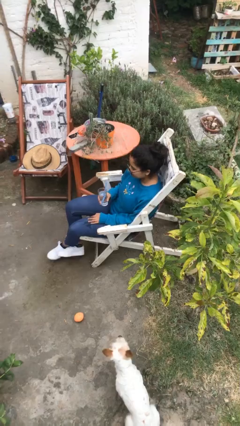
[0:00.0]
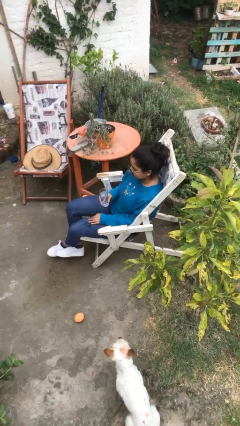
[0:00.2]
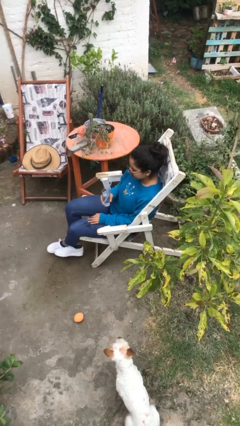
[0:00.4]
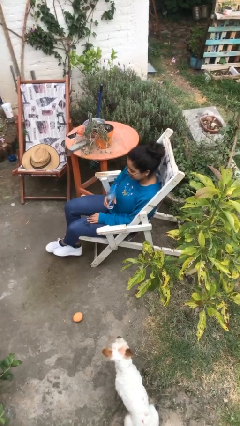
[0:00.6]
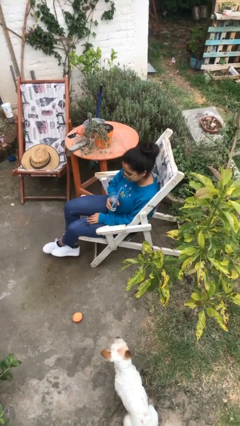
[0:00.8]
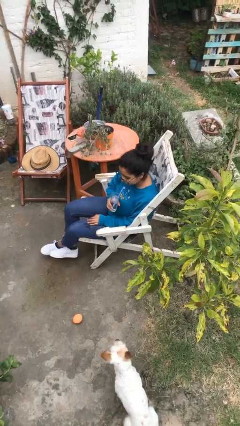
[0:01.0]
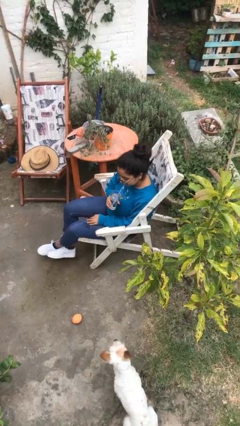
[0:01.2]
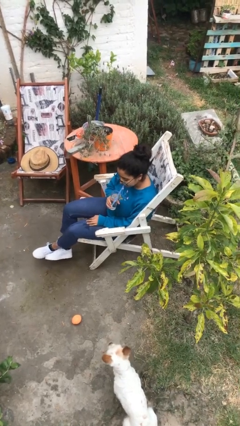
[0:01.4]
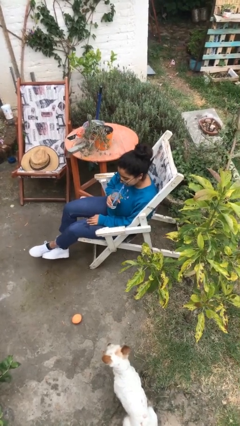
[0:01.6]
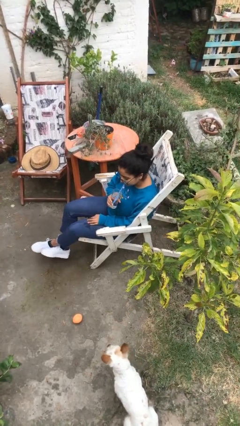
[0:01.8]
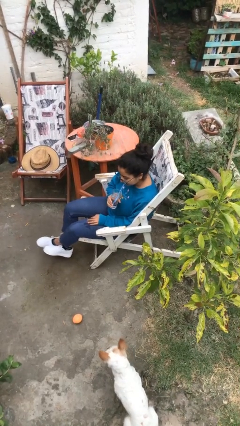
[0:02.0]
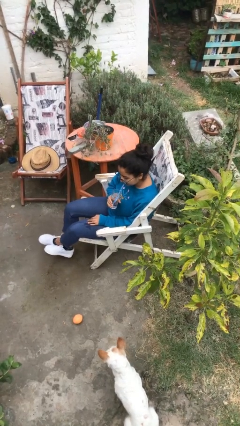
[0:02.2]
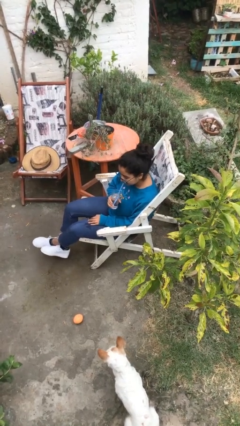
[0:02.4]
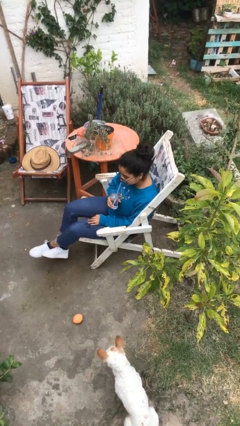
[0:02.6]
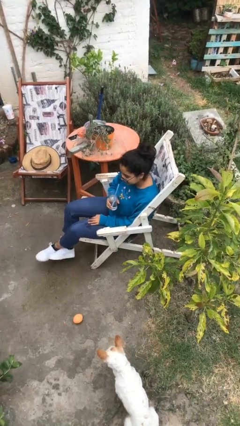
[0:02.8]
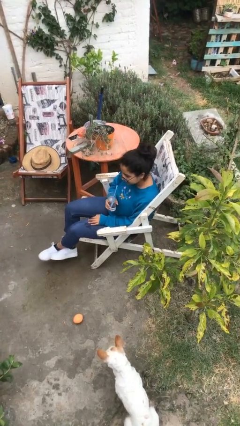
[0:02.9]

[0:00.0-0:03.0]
person drinks from straw

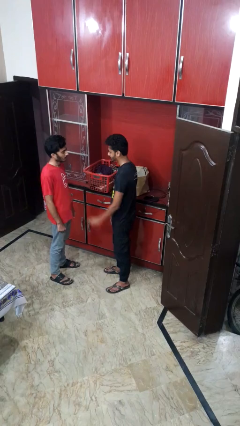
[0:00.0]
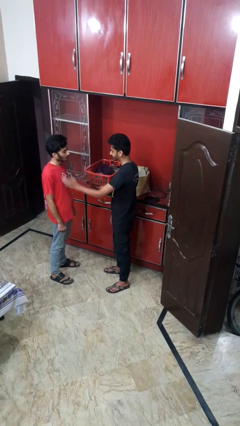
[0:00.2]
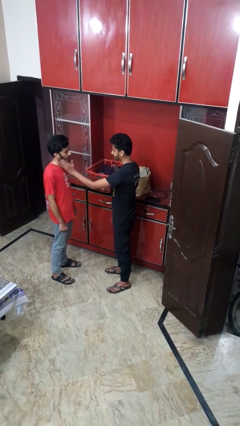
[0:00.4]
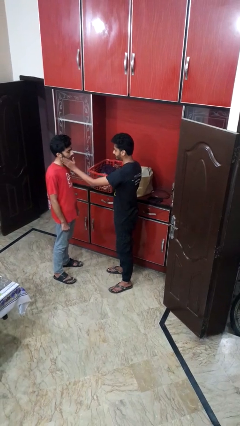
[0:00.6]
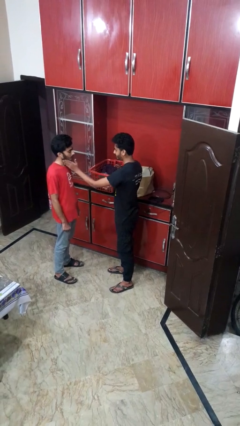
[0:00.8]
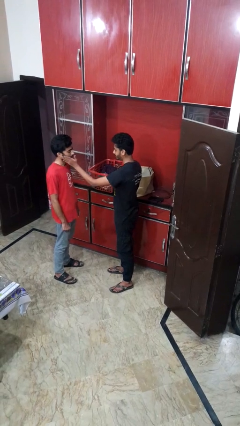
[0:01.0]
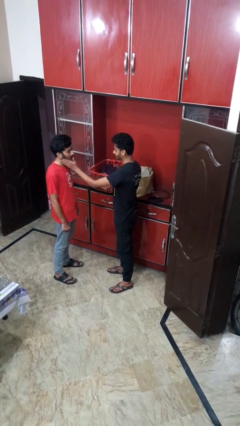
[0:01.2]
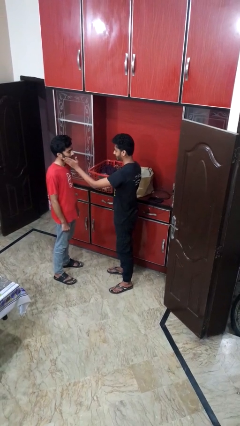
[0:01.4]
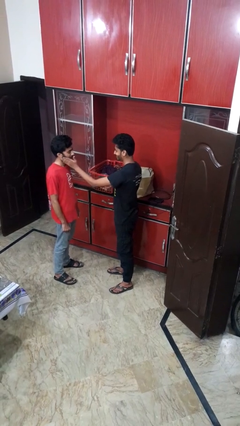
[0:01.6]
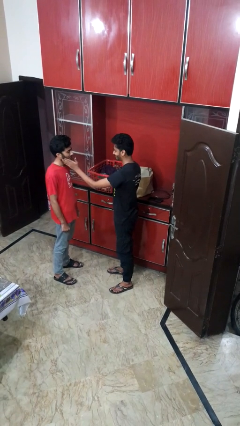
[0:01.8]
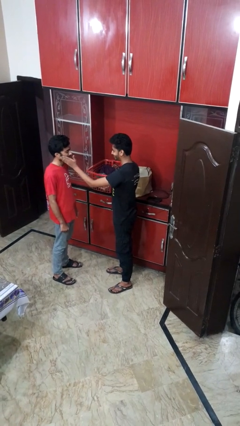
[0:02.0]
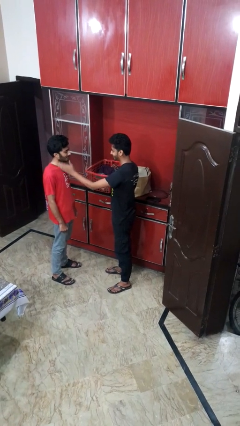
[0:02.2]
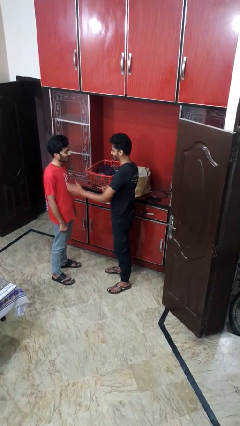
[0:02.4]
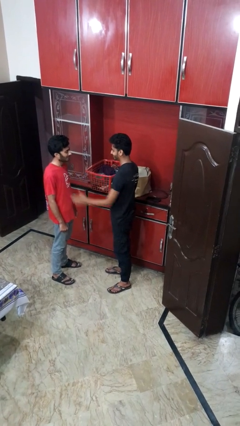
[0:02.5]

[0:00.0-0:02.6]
person touches face of person

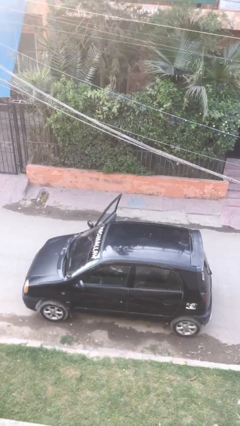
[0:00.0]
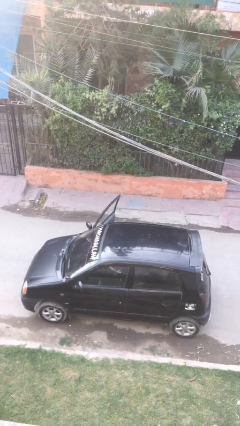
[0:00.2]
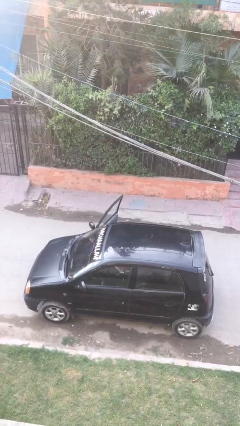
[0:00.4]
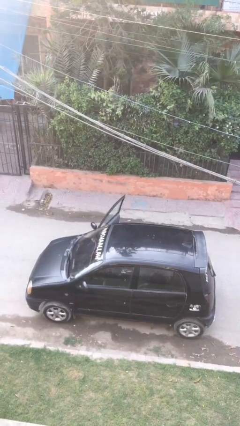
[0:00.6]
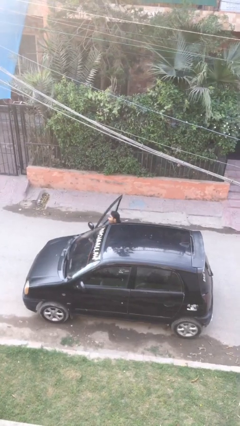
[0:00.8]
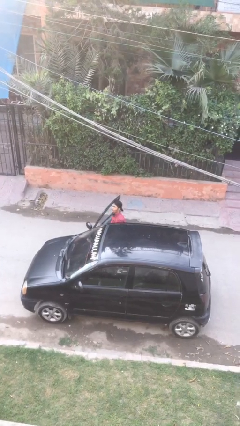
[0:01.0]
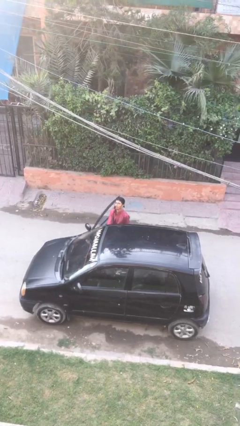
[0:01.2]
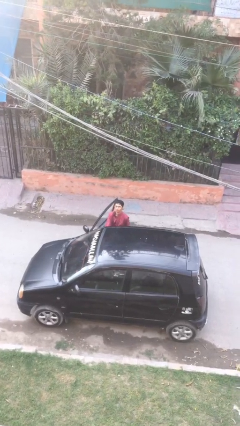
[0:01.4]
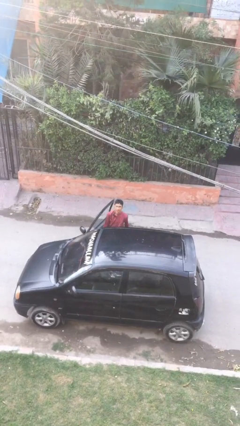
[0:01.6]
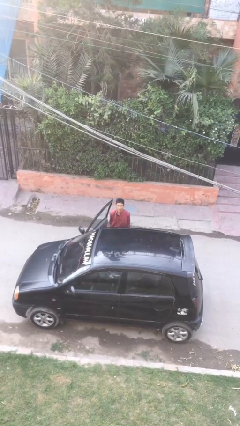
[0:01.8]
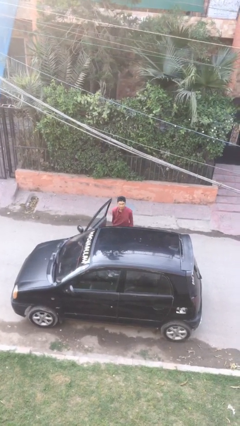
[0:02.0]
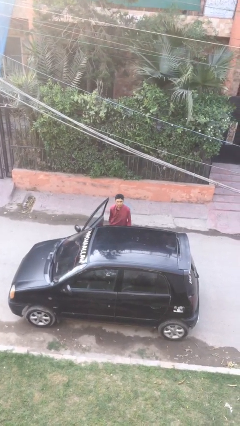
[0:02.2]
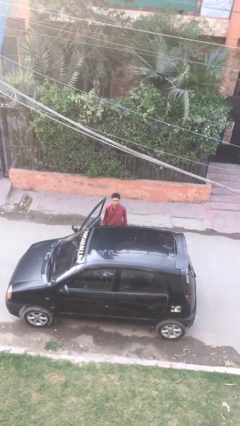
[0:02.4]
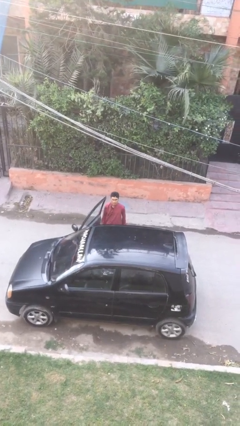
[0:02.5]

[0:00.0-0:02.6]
person exits car

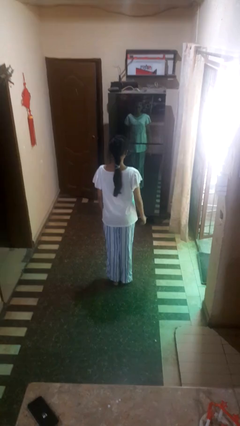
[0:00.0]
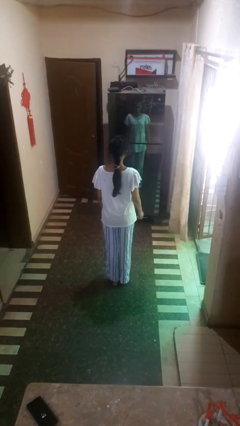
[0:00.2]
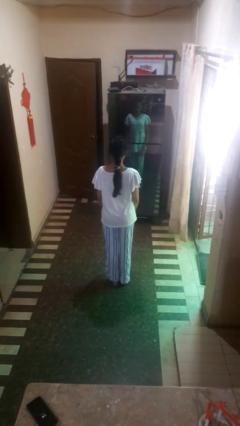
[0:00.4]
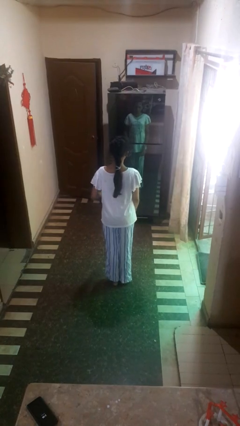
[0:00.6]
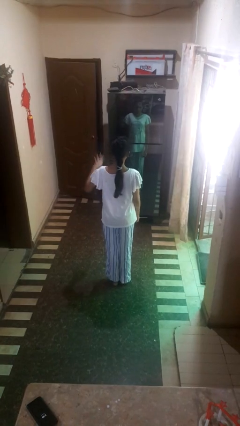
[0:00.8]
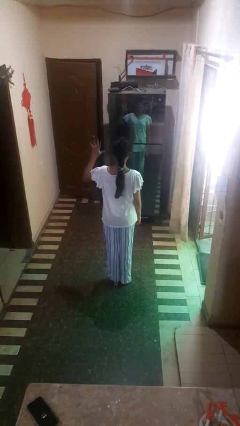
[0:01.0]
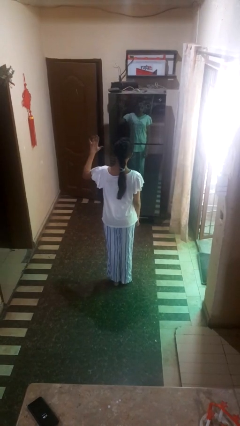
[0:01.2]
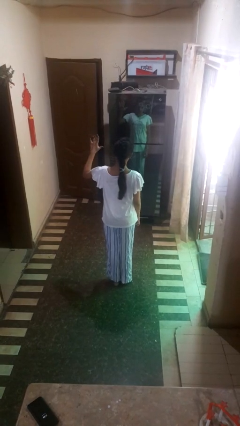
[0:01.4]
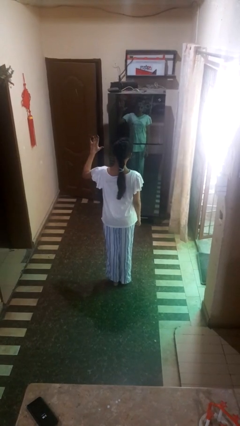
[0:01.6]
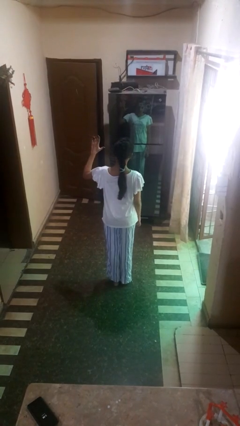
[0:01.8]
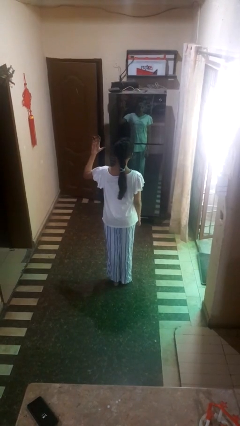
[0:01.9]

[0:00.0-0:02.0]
person gestures number five

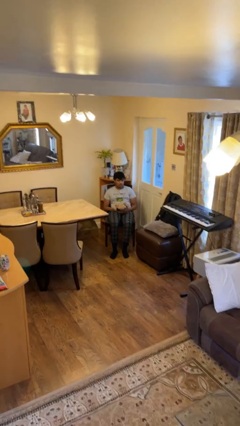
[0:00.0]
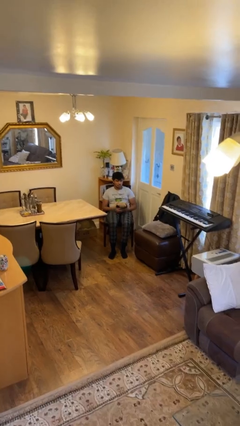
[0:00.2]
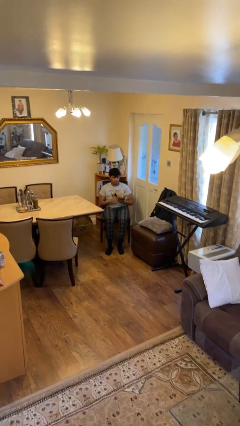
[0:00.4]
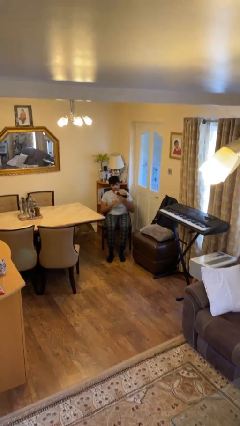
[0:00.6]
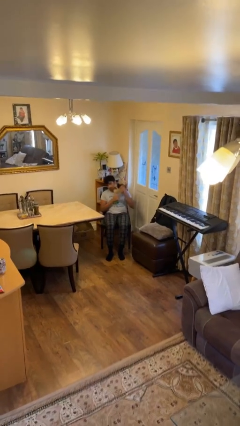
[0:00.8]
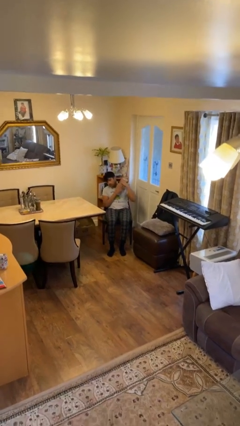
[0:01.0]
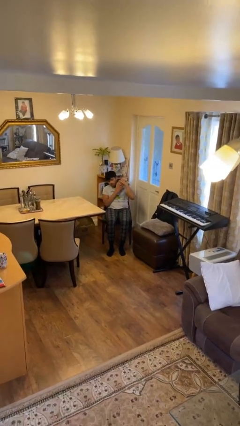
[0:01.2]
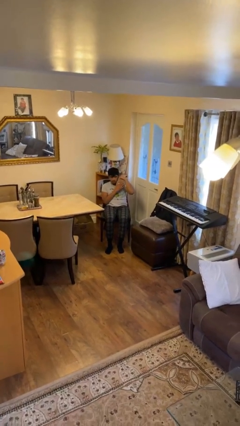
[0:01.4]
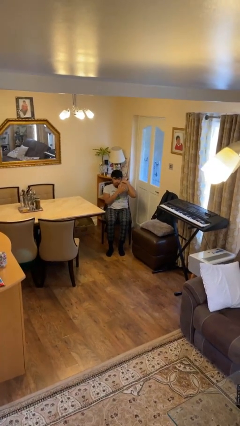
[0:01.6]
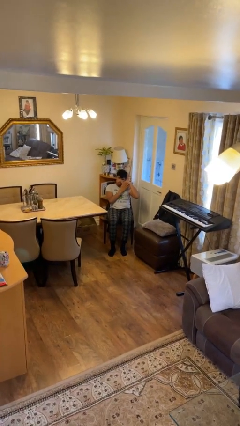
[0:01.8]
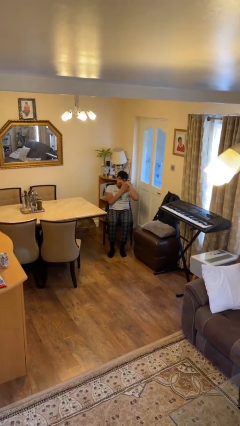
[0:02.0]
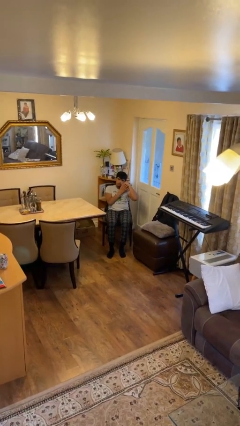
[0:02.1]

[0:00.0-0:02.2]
person hugs stuffed animal

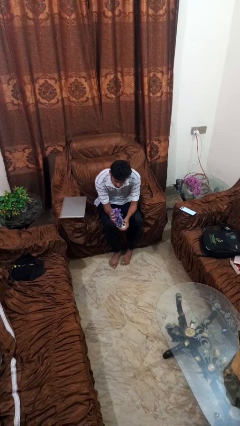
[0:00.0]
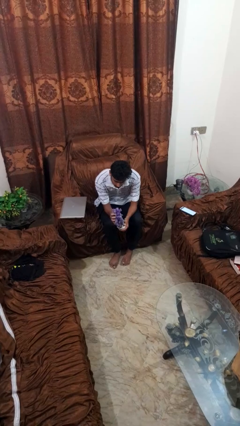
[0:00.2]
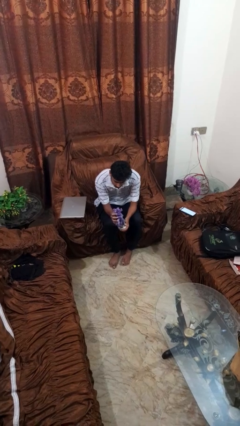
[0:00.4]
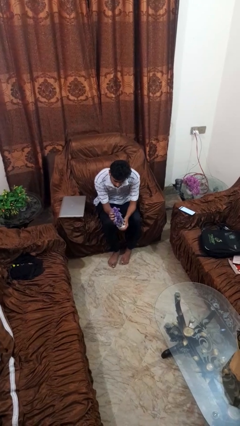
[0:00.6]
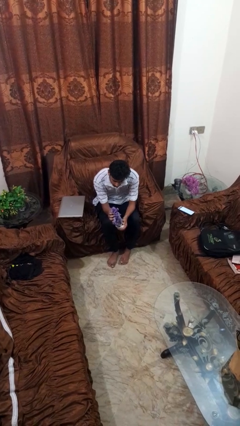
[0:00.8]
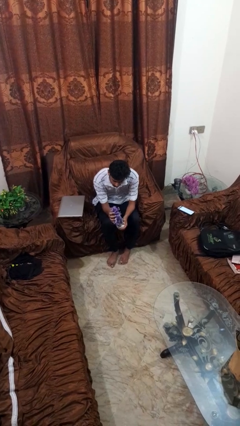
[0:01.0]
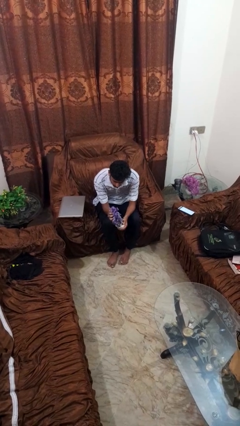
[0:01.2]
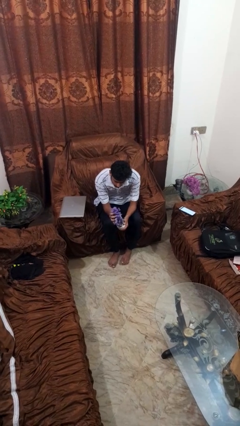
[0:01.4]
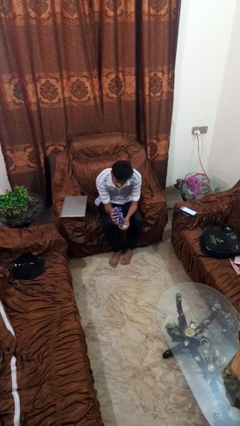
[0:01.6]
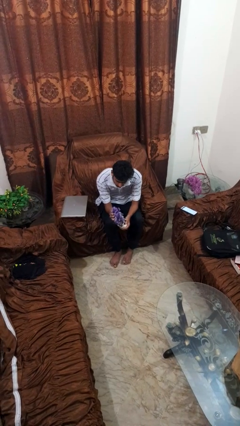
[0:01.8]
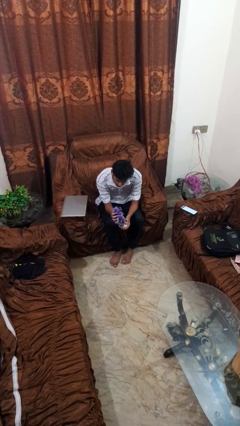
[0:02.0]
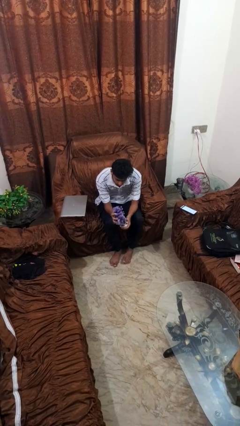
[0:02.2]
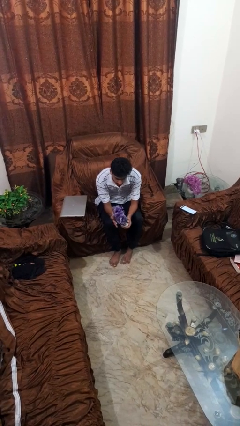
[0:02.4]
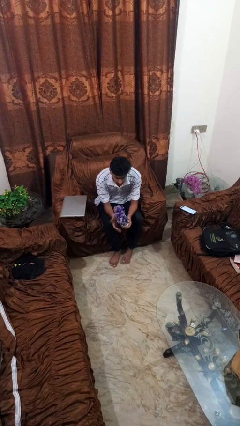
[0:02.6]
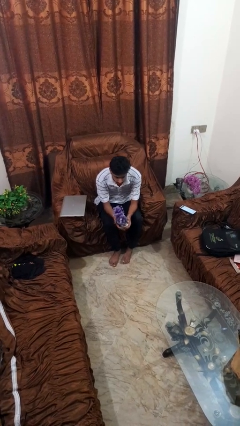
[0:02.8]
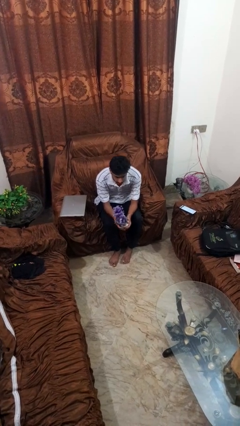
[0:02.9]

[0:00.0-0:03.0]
person squeezes object

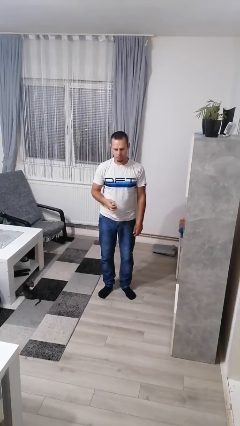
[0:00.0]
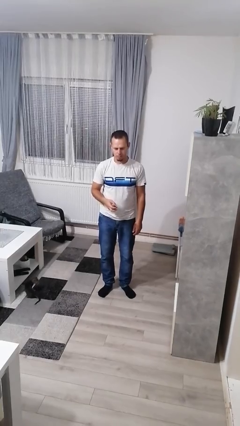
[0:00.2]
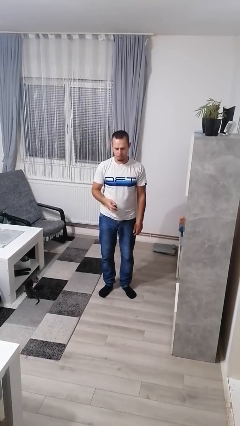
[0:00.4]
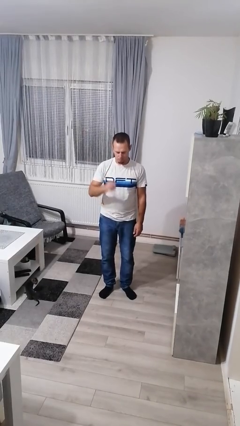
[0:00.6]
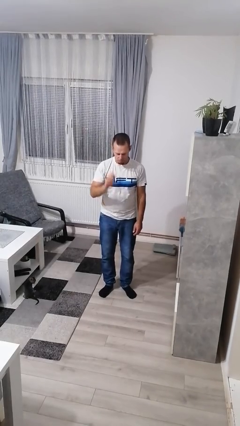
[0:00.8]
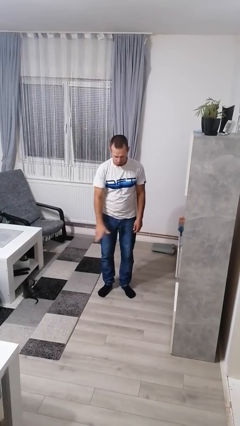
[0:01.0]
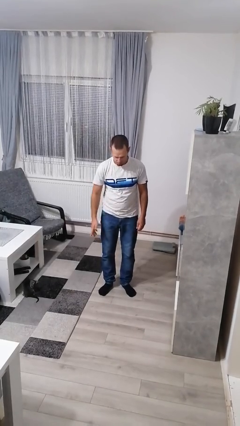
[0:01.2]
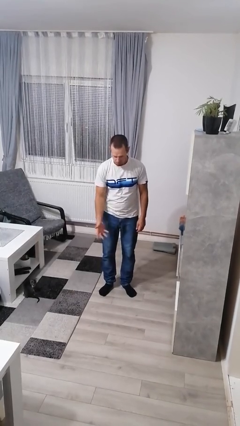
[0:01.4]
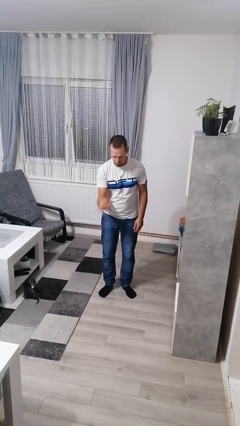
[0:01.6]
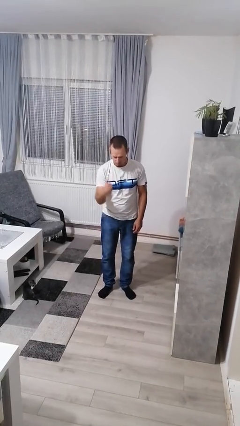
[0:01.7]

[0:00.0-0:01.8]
person bounces ball on floor
